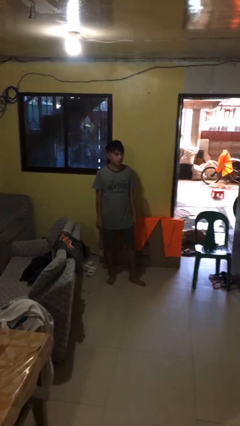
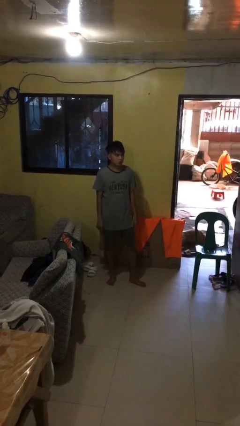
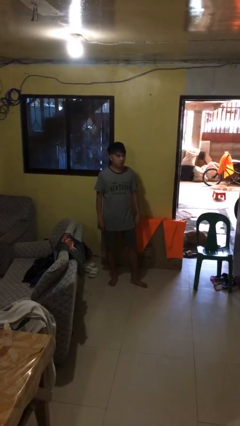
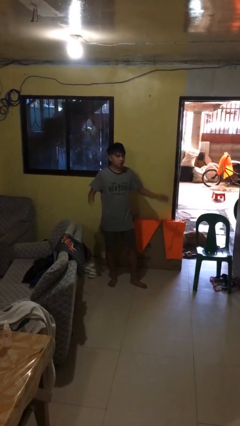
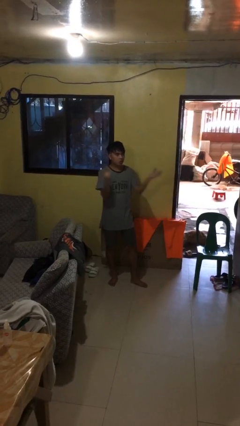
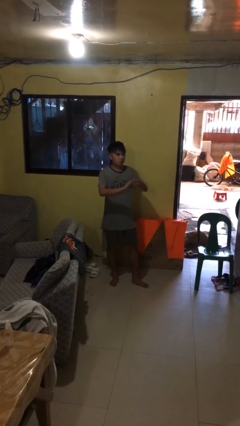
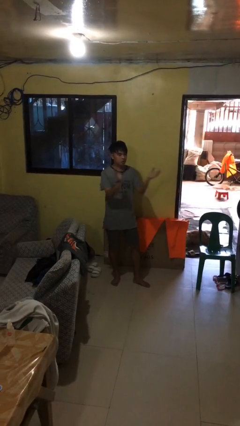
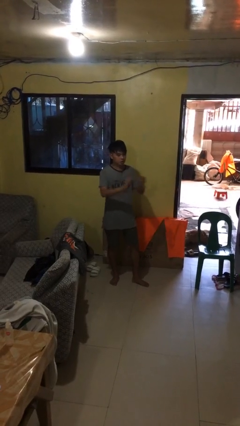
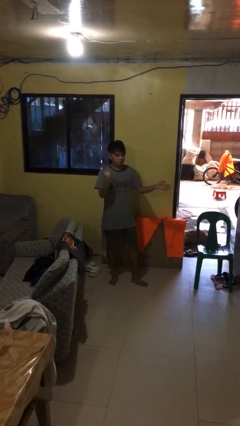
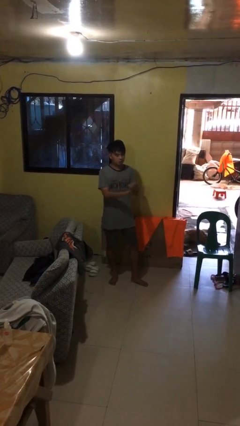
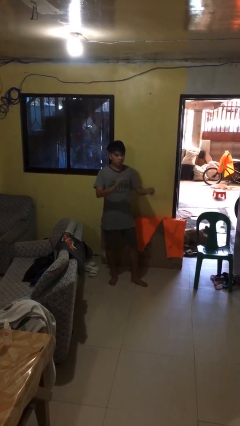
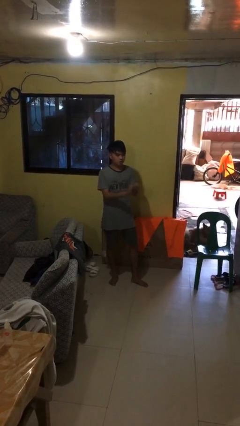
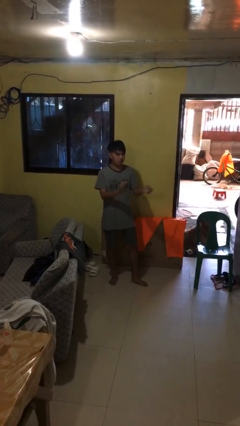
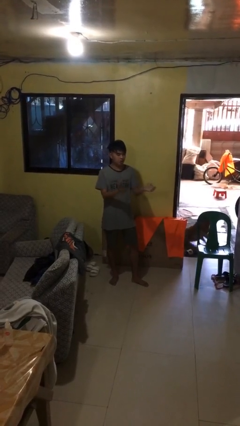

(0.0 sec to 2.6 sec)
person claps hands

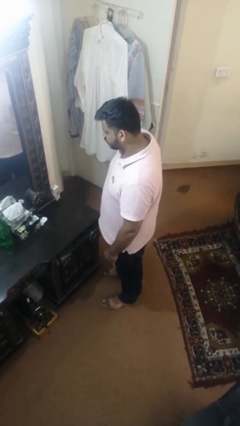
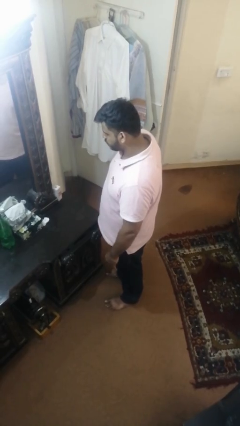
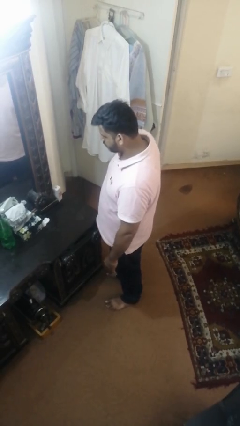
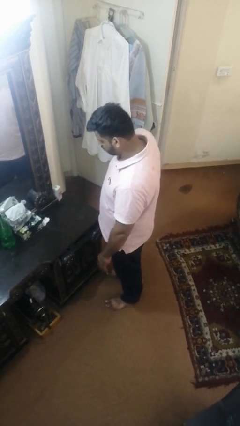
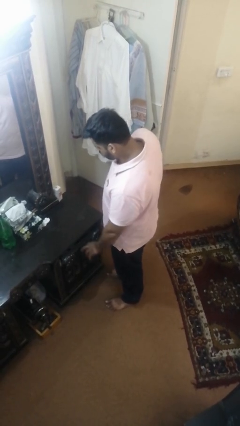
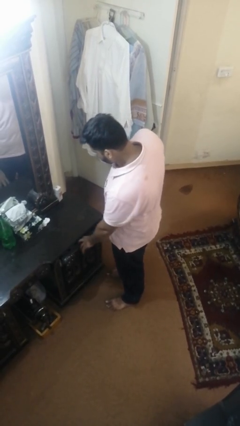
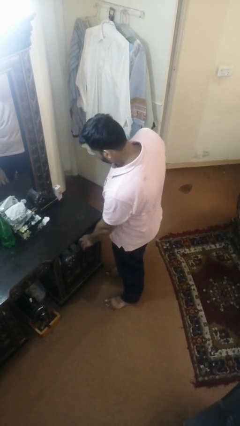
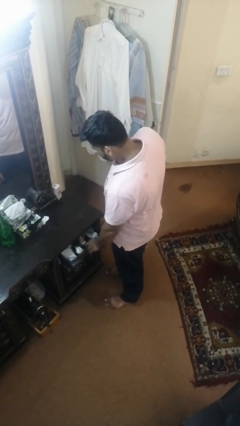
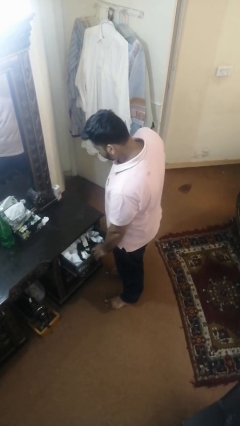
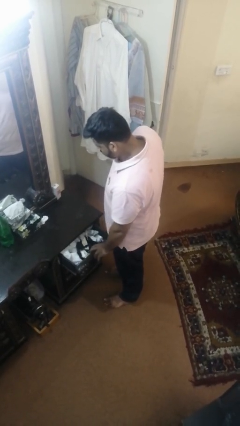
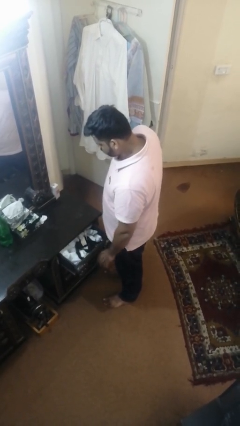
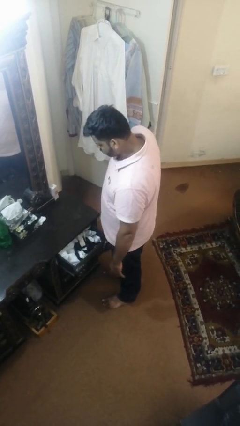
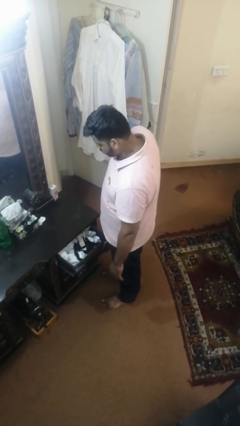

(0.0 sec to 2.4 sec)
person opens dresser drawer

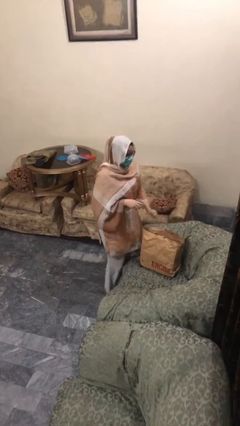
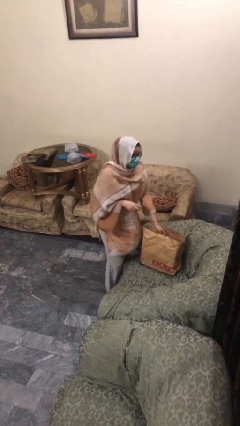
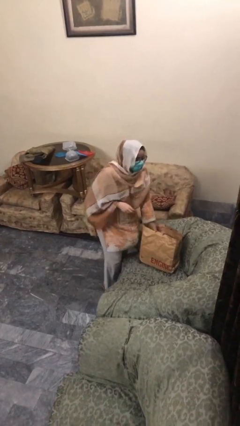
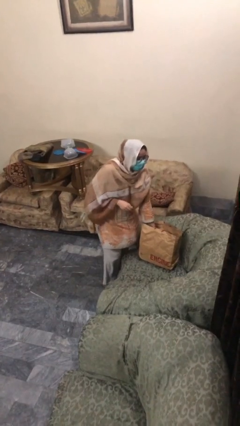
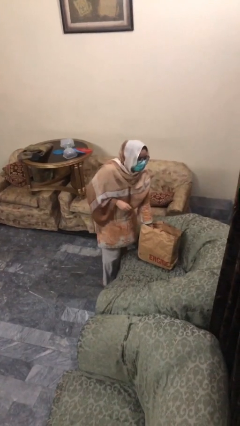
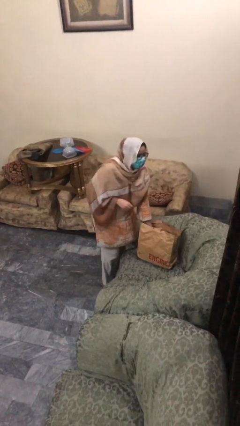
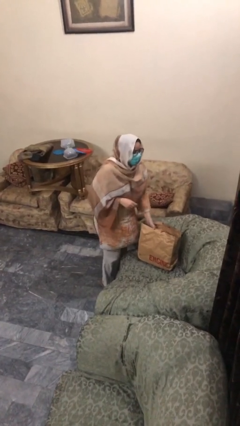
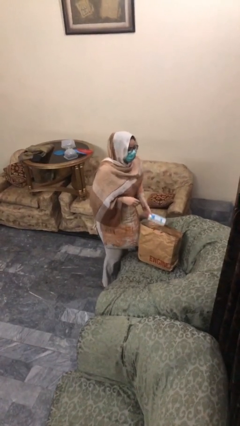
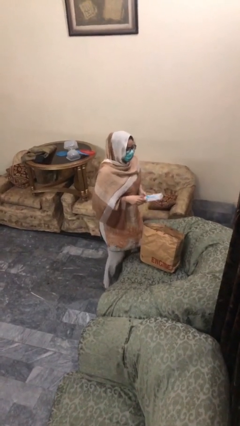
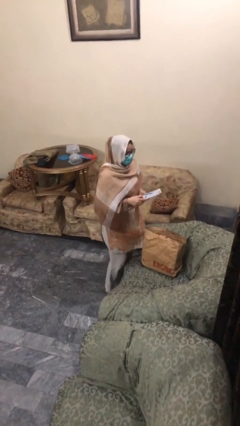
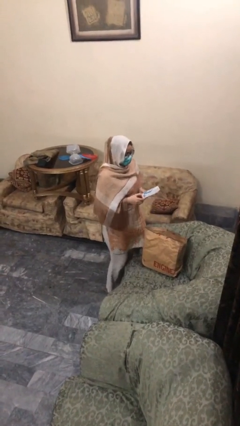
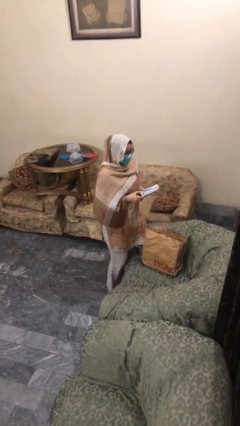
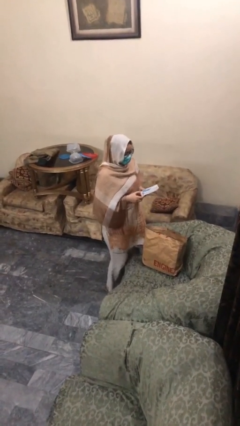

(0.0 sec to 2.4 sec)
person takes object from bag

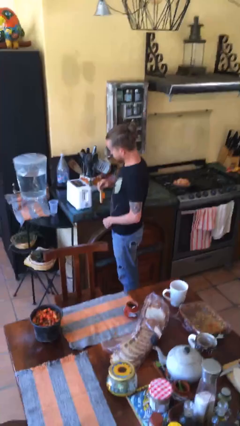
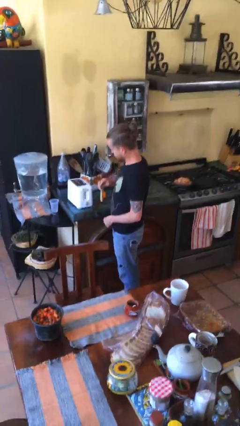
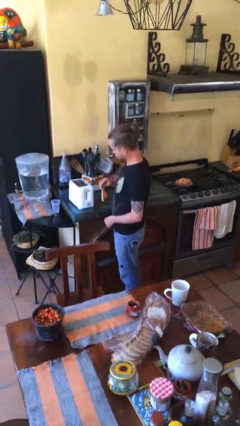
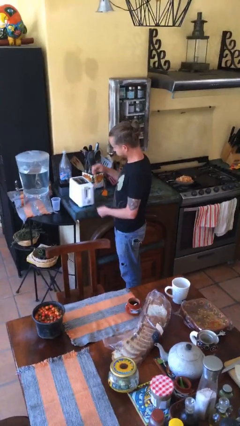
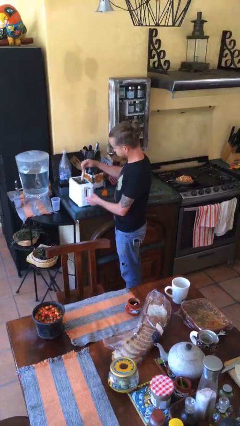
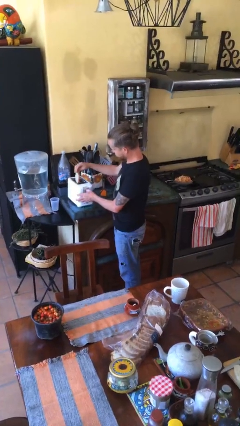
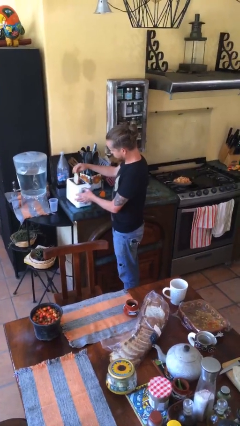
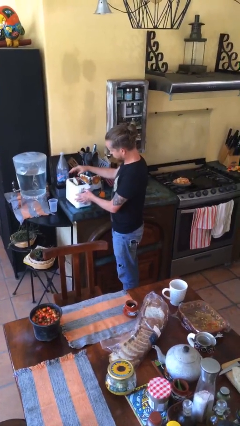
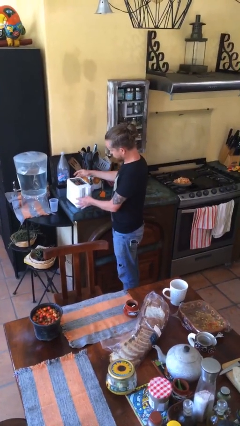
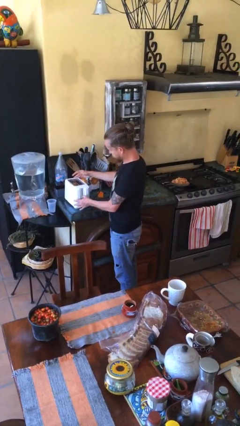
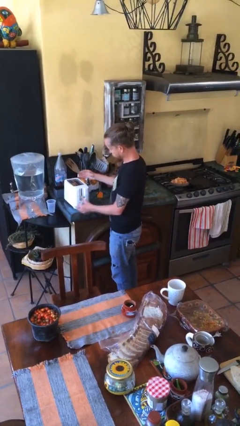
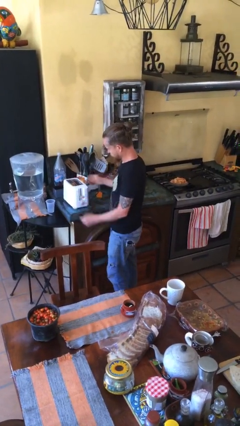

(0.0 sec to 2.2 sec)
person puts object into toaster

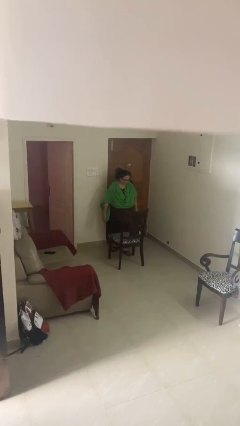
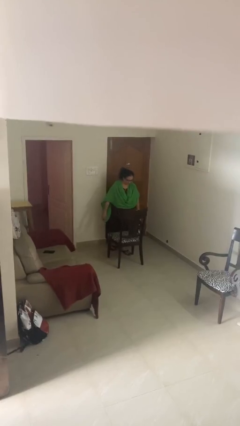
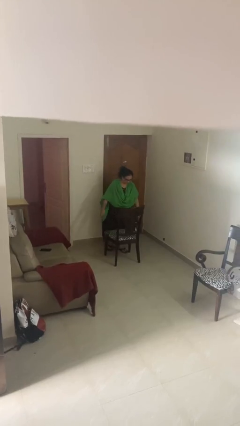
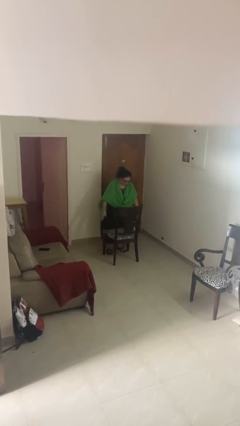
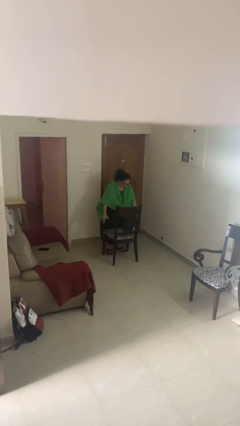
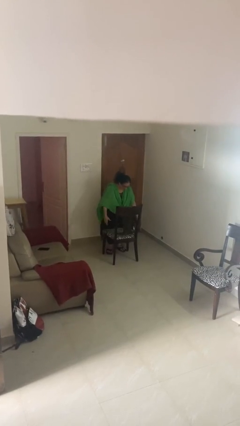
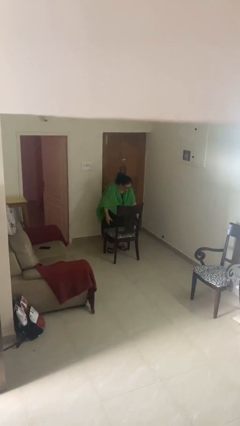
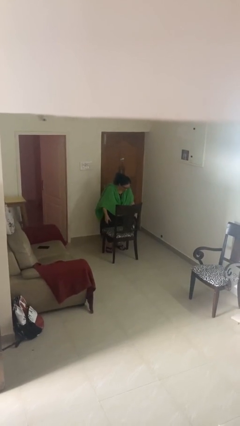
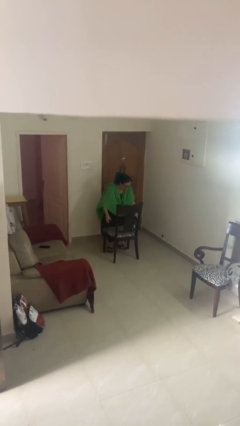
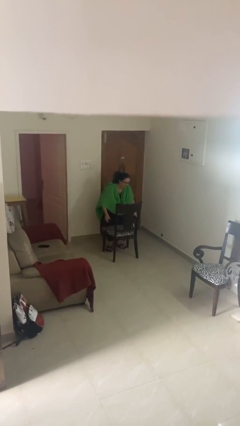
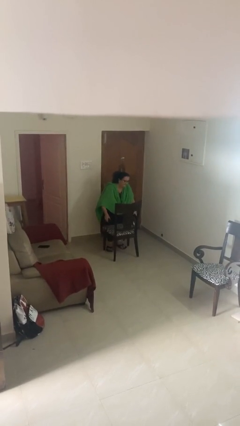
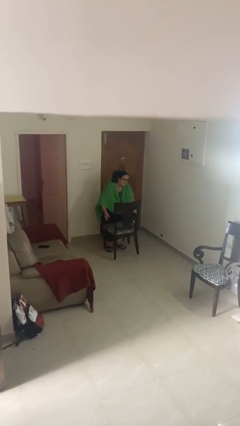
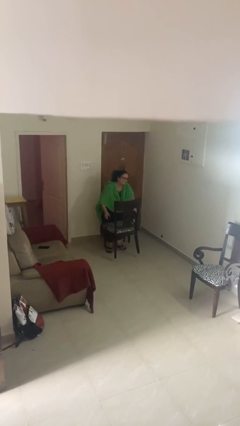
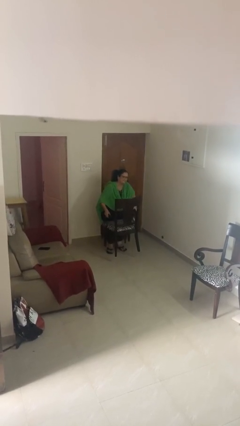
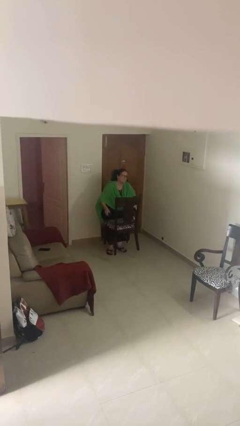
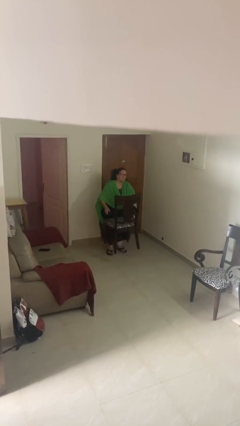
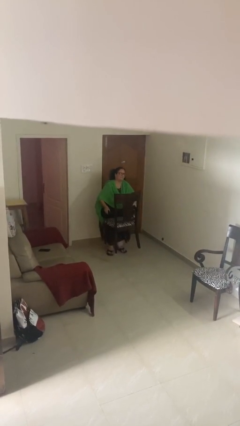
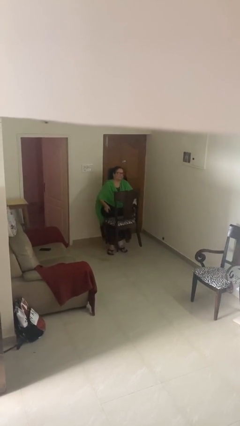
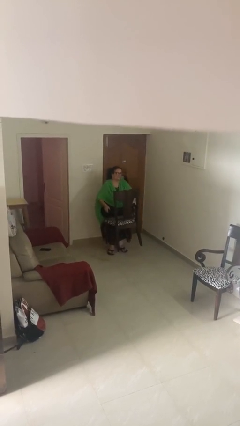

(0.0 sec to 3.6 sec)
person picks up object from floor

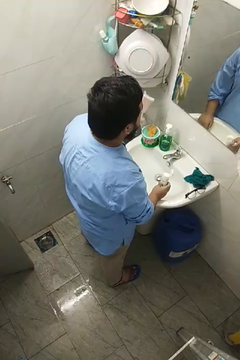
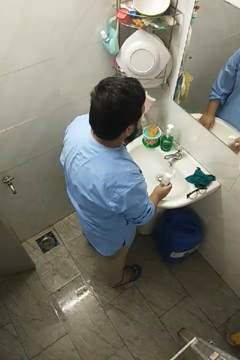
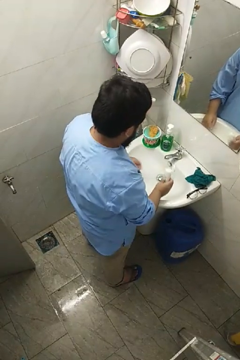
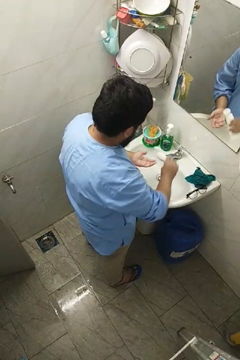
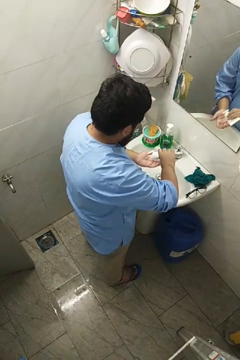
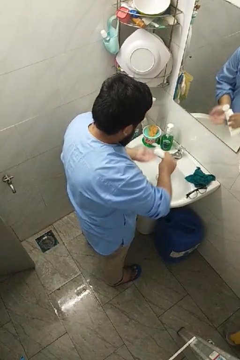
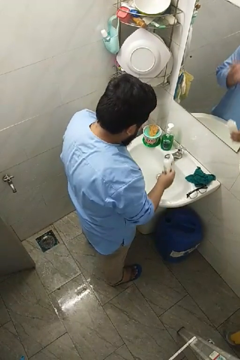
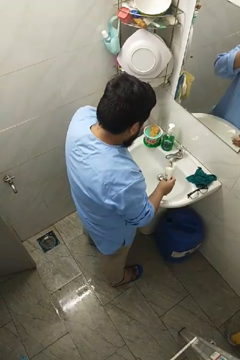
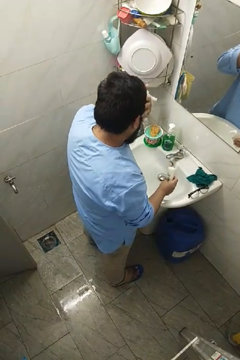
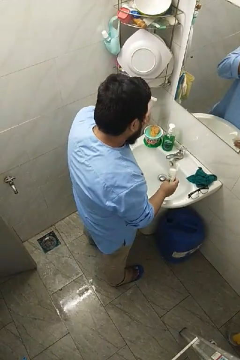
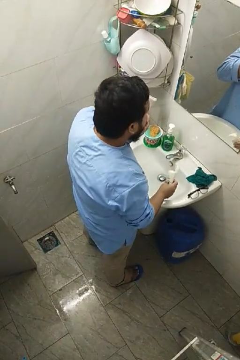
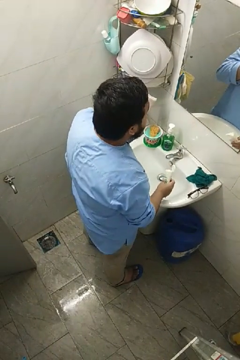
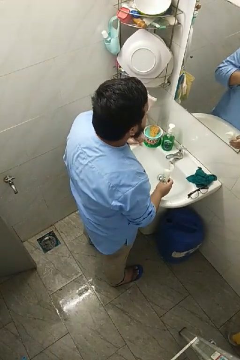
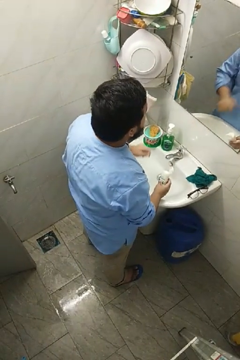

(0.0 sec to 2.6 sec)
person applies facial moisturizer

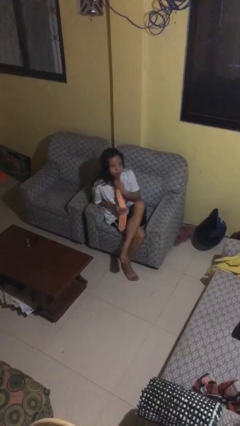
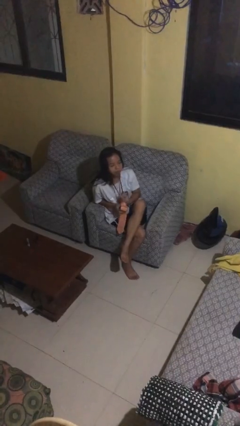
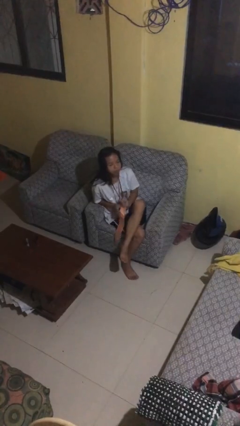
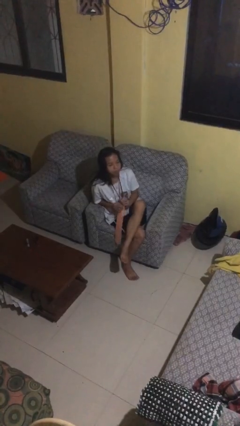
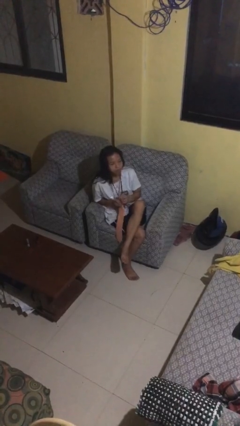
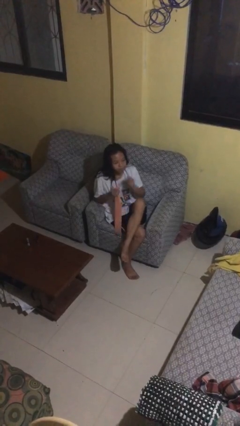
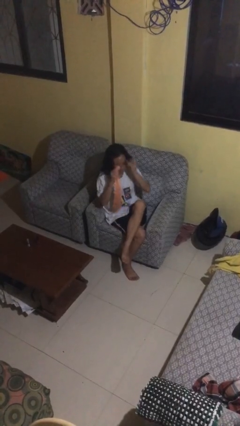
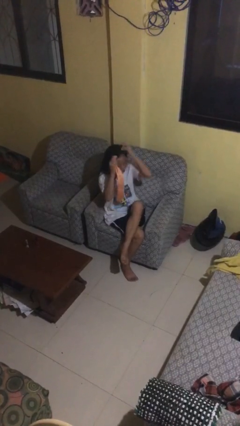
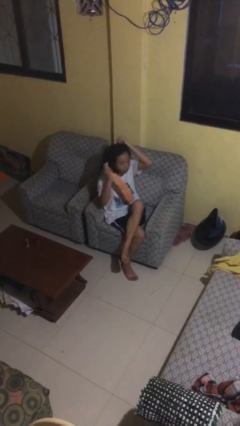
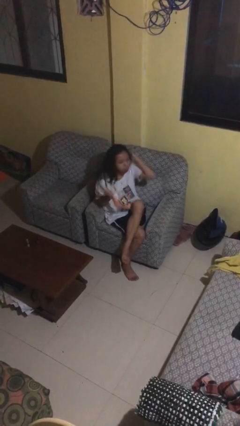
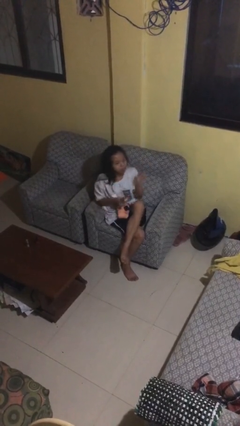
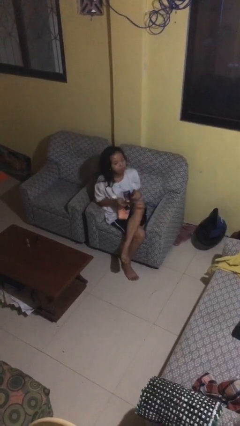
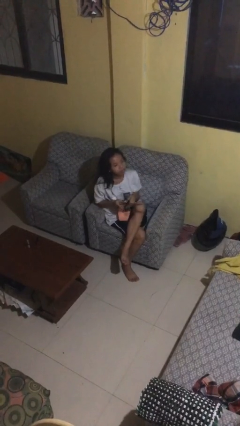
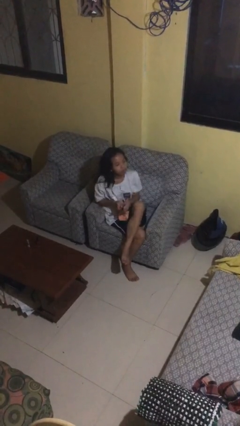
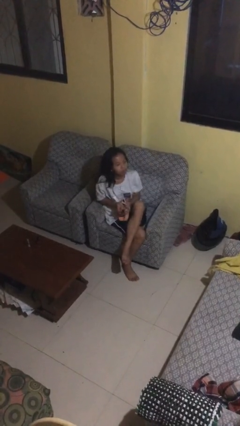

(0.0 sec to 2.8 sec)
person takes off necktie
